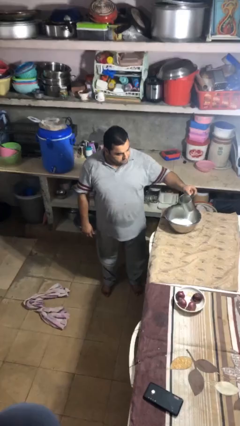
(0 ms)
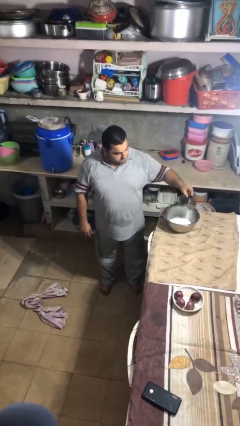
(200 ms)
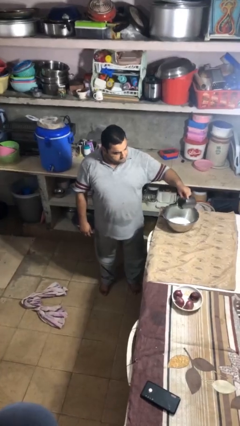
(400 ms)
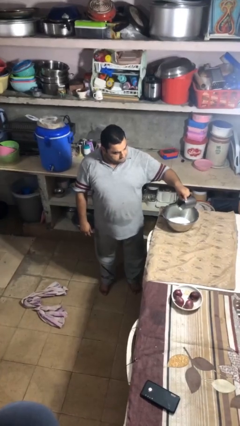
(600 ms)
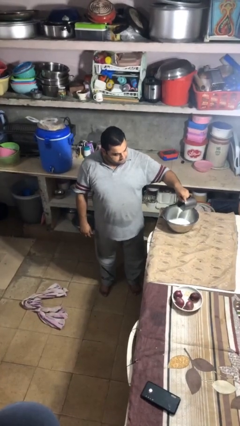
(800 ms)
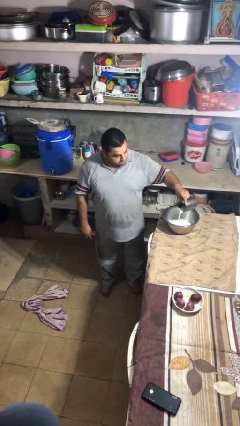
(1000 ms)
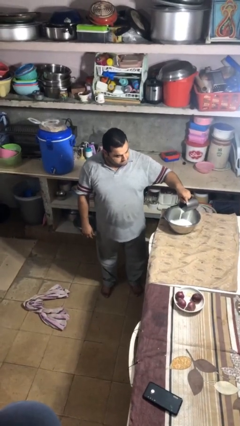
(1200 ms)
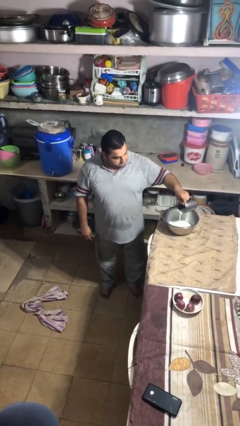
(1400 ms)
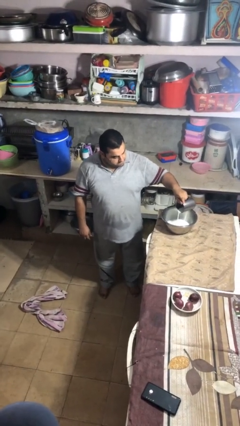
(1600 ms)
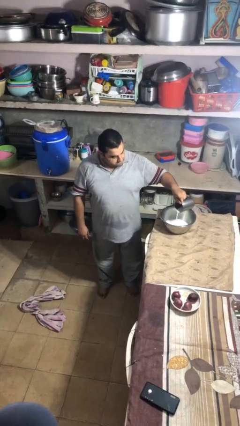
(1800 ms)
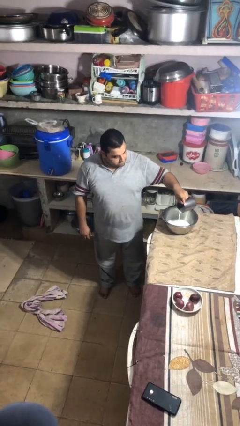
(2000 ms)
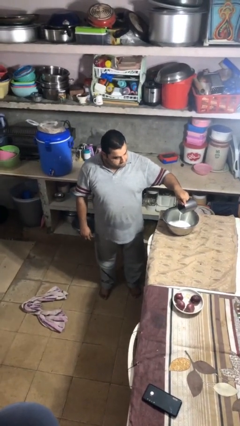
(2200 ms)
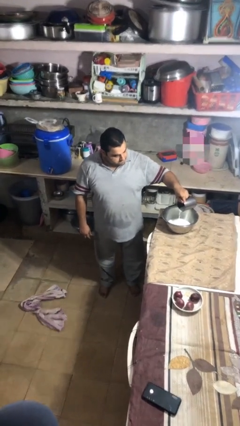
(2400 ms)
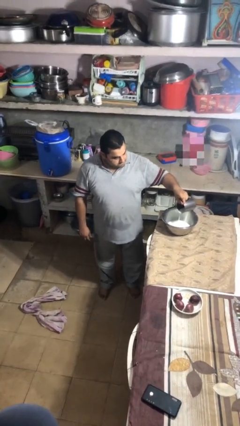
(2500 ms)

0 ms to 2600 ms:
person pours into bowl

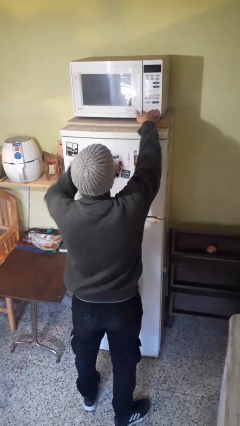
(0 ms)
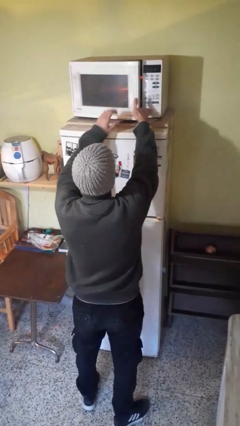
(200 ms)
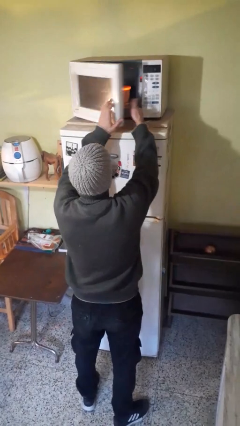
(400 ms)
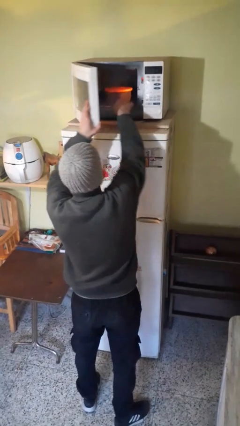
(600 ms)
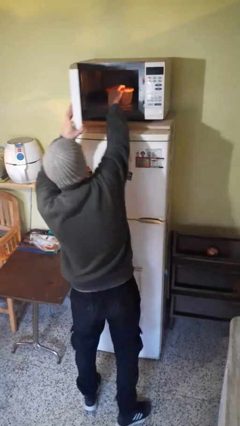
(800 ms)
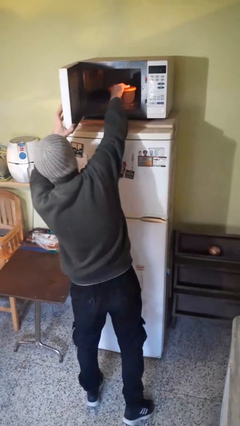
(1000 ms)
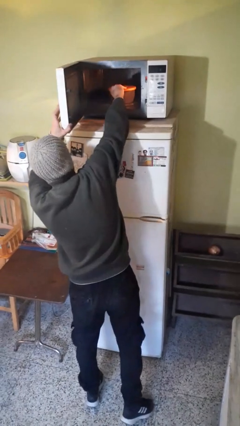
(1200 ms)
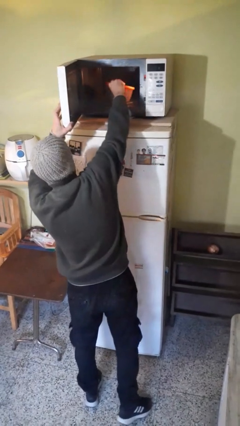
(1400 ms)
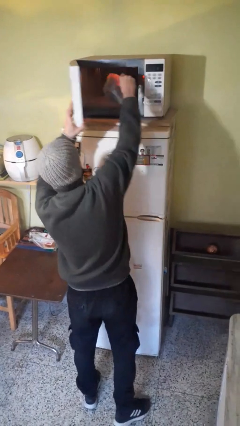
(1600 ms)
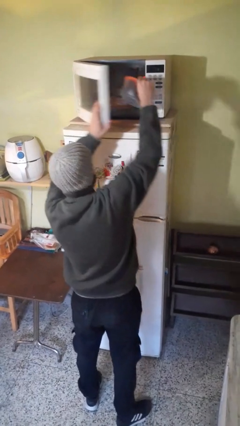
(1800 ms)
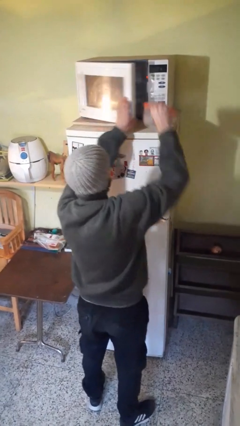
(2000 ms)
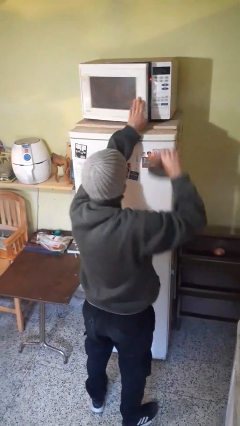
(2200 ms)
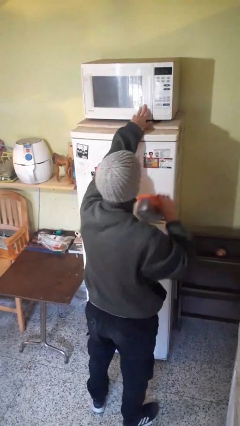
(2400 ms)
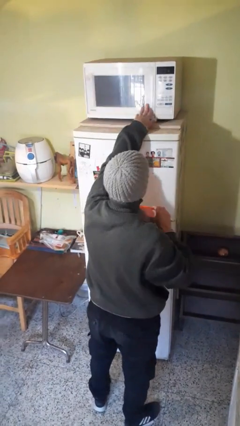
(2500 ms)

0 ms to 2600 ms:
person takes object from microwave

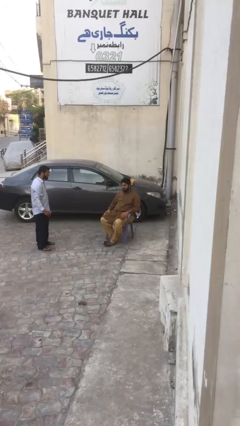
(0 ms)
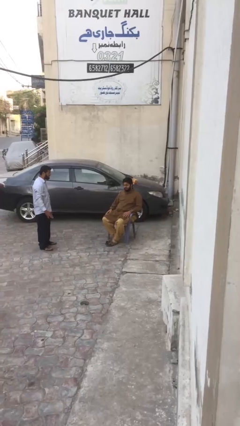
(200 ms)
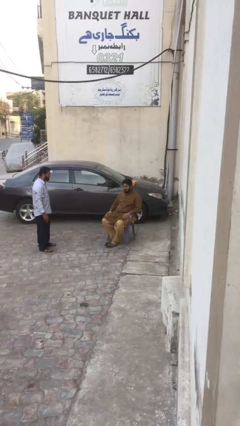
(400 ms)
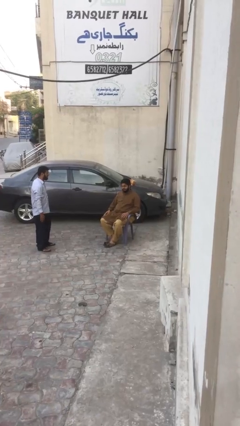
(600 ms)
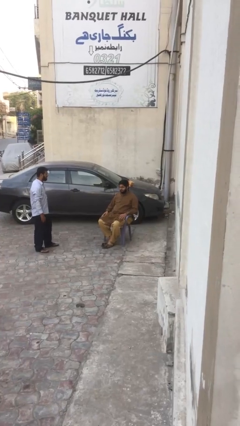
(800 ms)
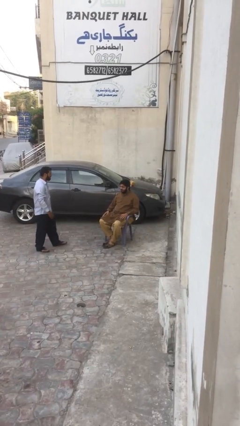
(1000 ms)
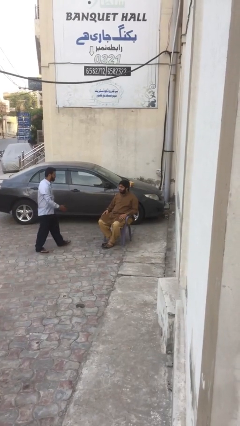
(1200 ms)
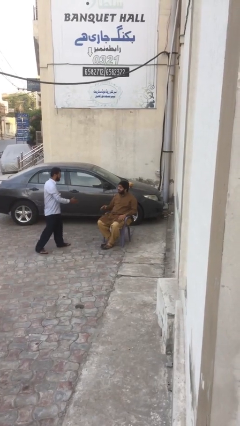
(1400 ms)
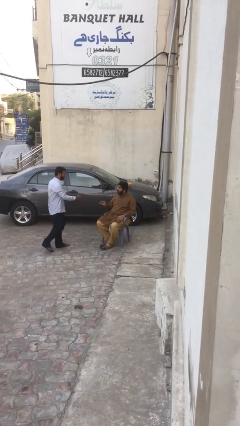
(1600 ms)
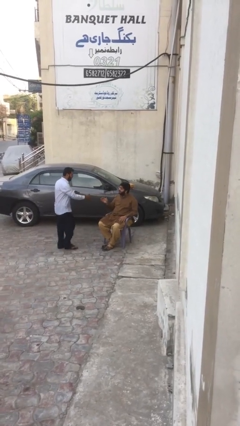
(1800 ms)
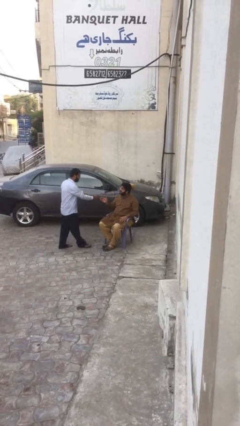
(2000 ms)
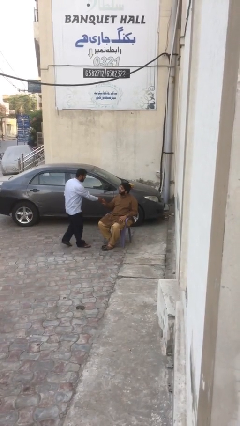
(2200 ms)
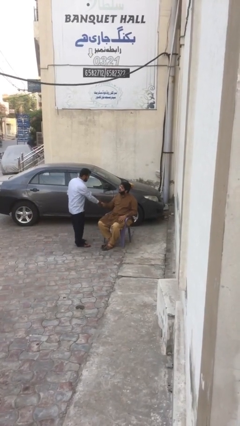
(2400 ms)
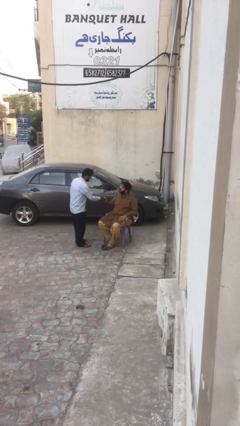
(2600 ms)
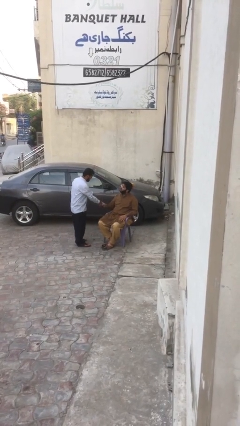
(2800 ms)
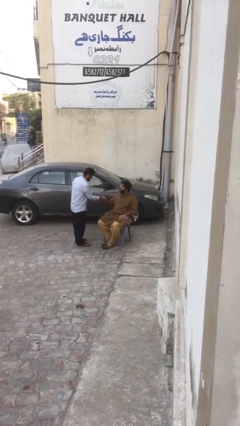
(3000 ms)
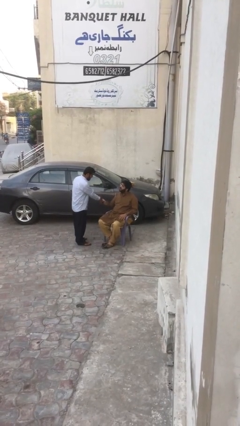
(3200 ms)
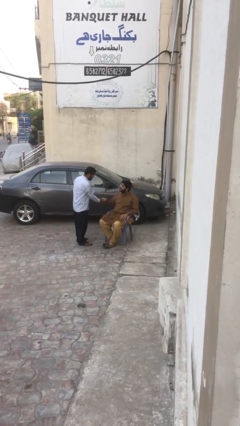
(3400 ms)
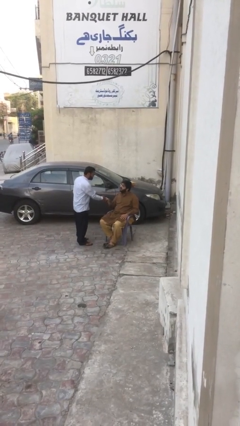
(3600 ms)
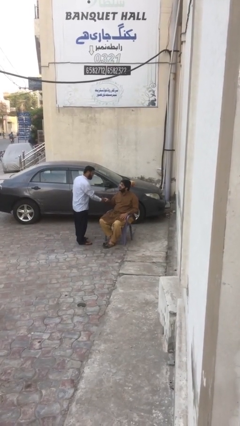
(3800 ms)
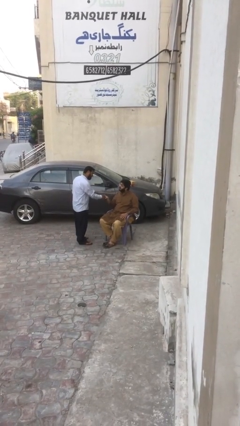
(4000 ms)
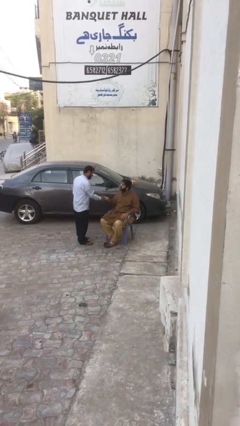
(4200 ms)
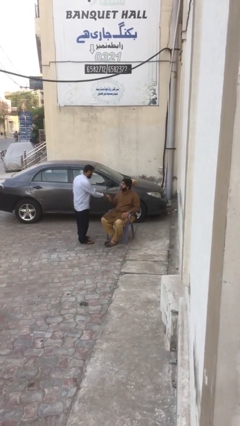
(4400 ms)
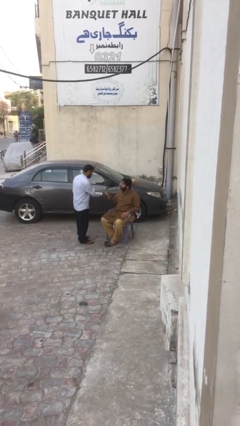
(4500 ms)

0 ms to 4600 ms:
person shakes hand

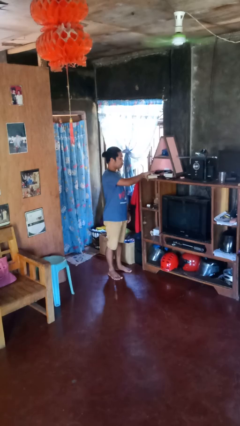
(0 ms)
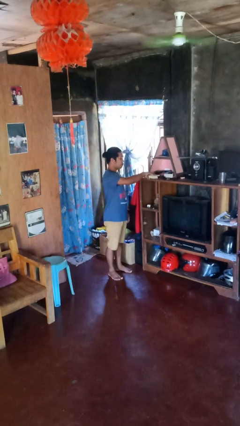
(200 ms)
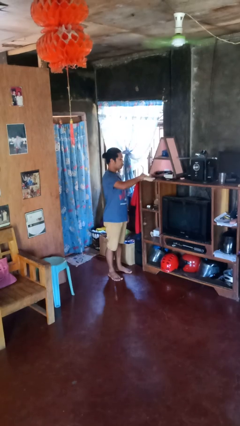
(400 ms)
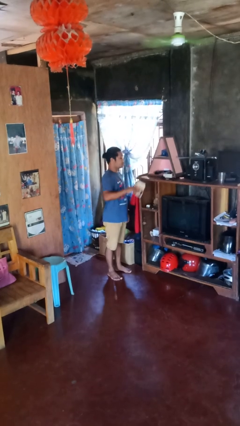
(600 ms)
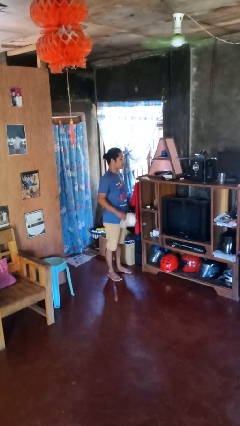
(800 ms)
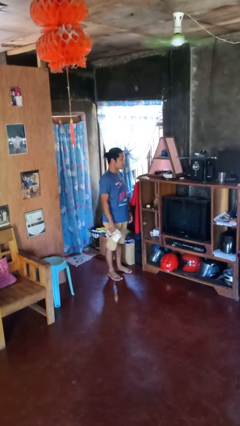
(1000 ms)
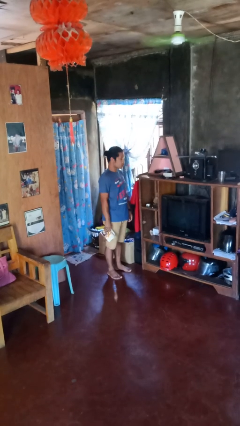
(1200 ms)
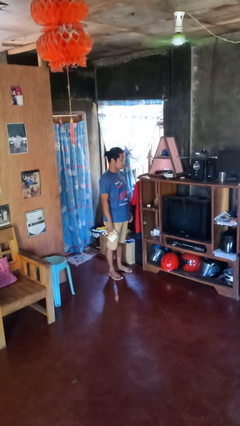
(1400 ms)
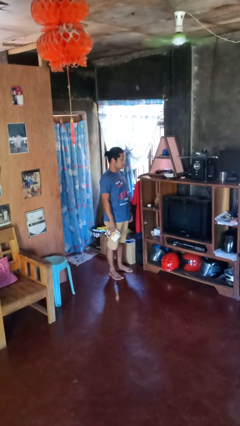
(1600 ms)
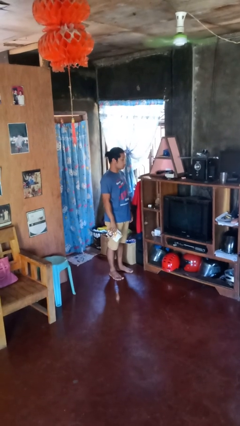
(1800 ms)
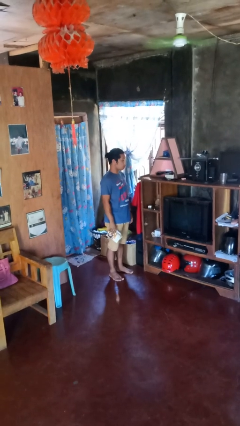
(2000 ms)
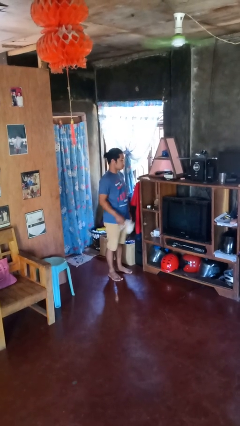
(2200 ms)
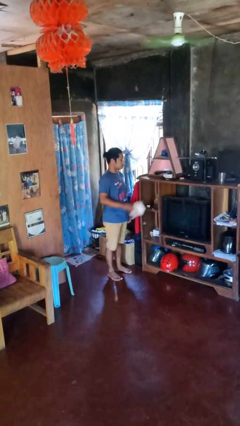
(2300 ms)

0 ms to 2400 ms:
person picks up object from shelf

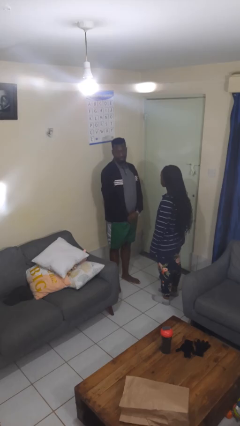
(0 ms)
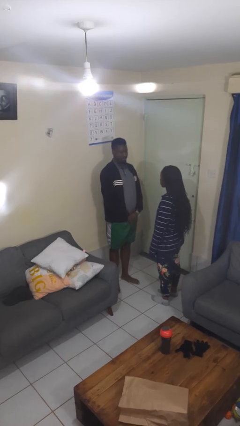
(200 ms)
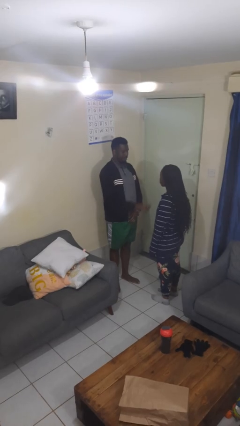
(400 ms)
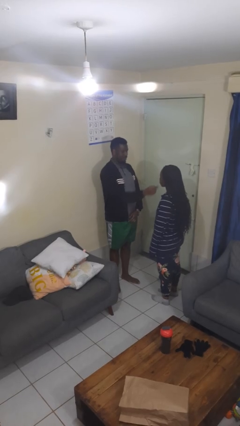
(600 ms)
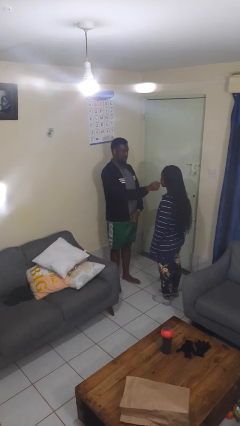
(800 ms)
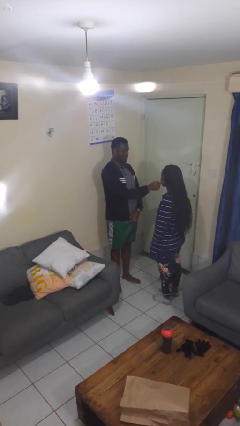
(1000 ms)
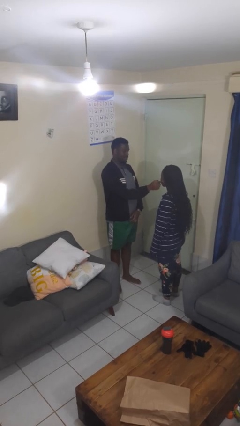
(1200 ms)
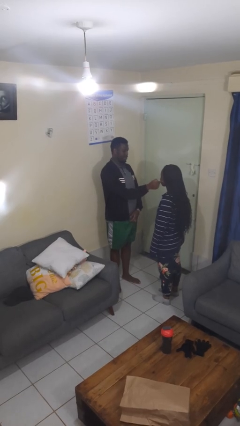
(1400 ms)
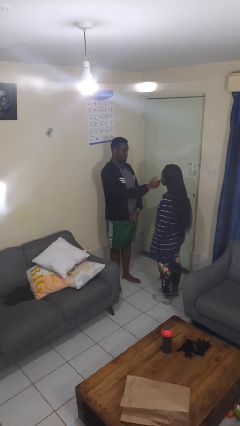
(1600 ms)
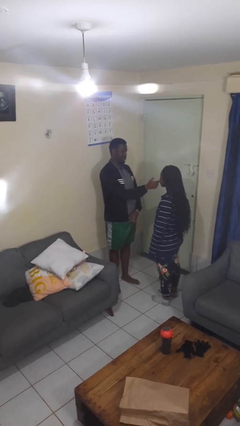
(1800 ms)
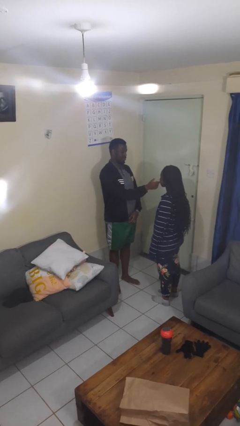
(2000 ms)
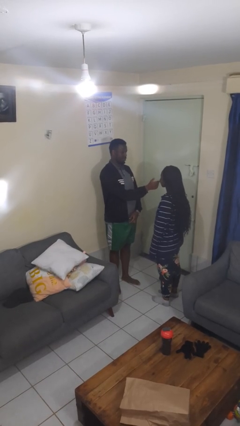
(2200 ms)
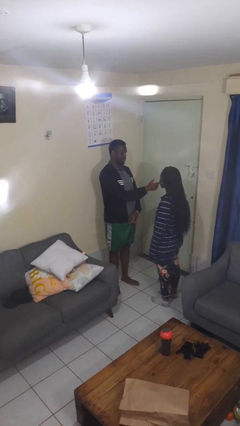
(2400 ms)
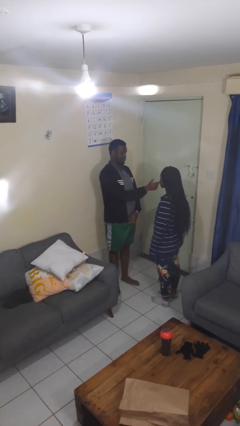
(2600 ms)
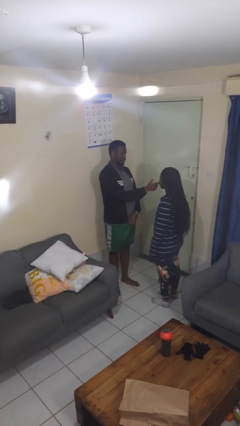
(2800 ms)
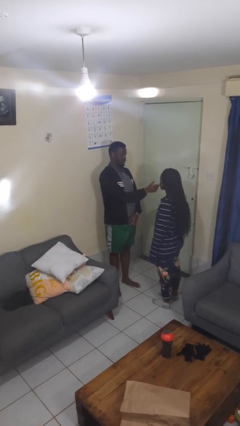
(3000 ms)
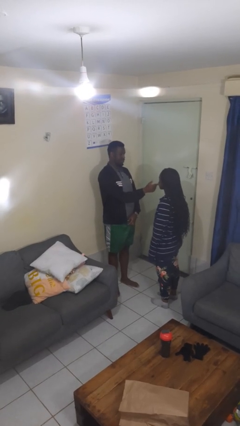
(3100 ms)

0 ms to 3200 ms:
person touches face of person

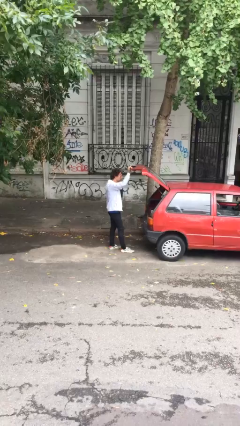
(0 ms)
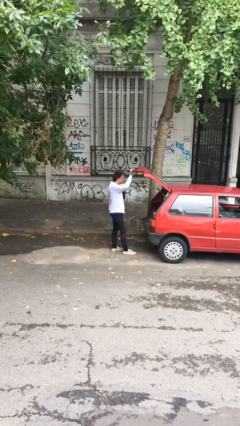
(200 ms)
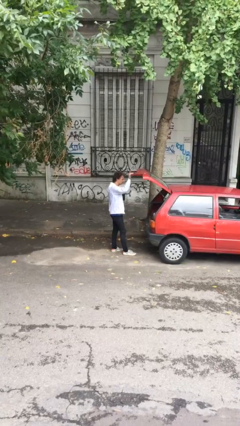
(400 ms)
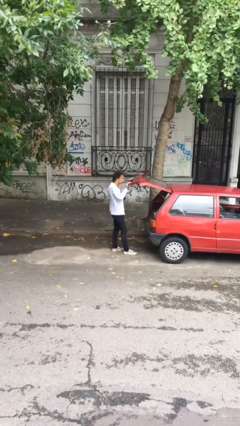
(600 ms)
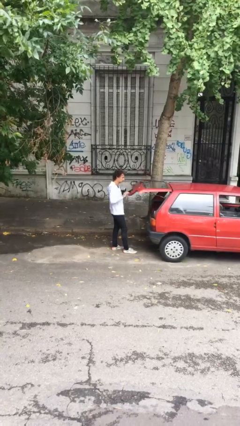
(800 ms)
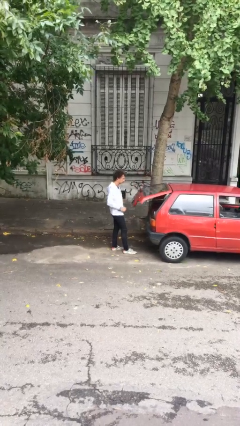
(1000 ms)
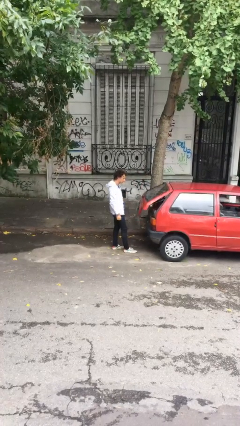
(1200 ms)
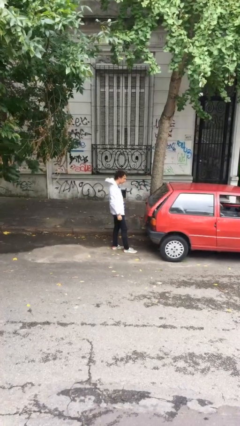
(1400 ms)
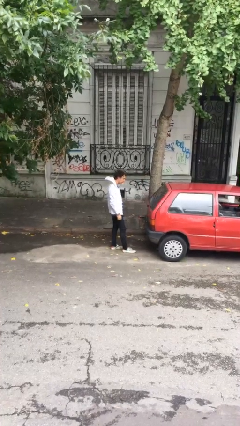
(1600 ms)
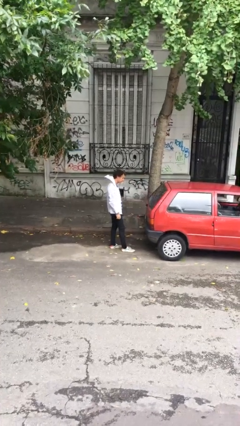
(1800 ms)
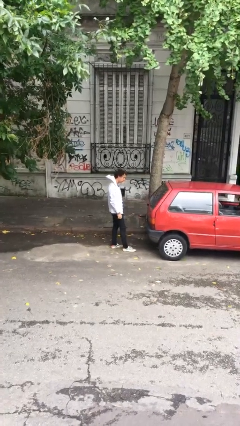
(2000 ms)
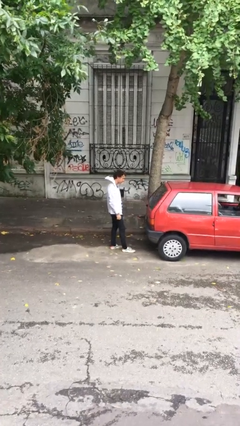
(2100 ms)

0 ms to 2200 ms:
person closes car trunk
